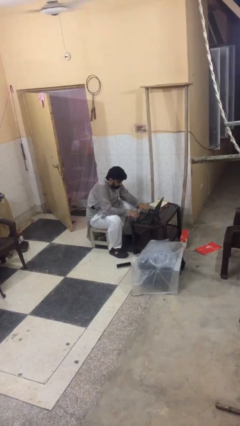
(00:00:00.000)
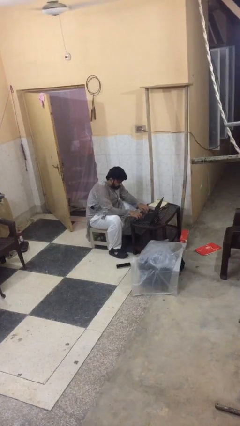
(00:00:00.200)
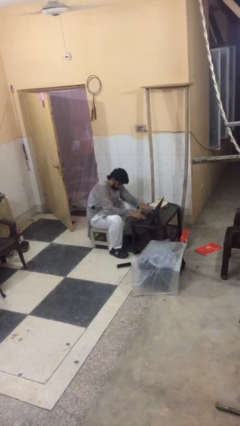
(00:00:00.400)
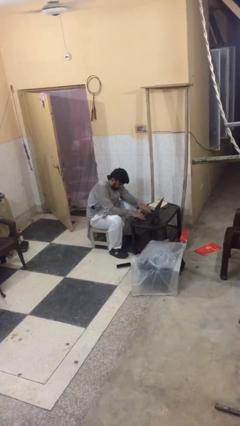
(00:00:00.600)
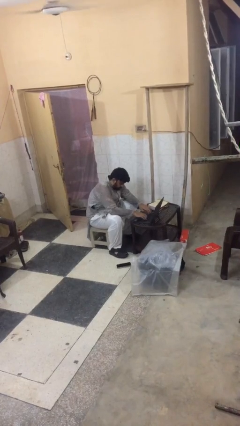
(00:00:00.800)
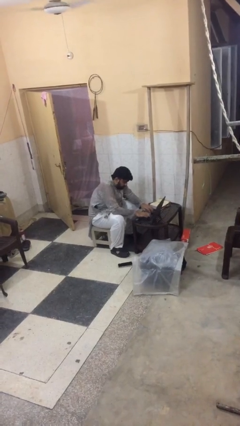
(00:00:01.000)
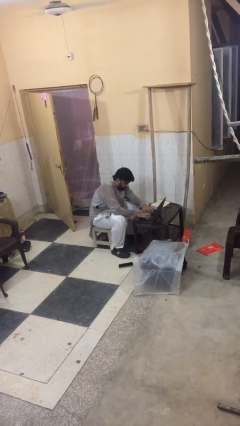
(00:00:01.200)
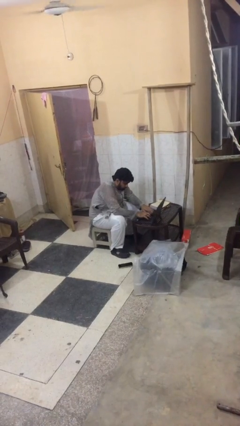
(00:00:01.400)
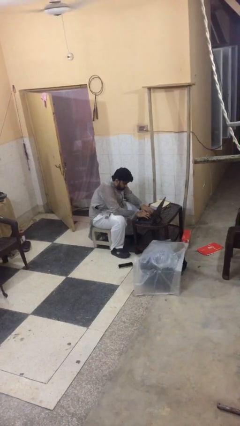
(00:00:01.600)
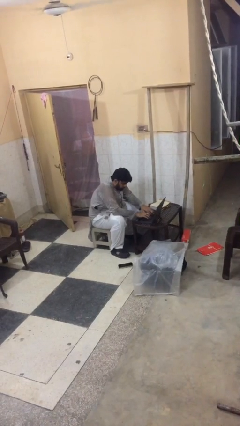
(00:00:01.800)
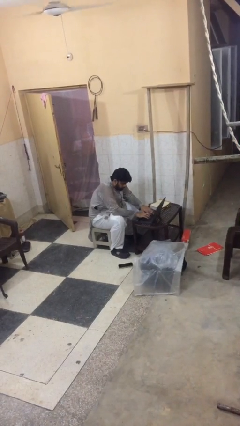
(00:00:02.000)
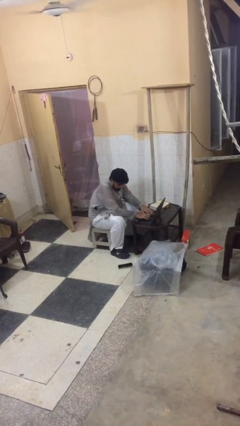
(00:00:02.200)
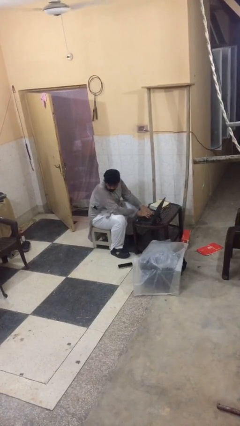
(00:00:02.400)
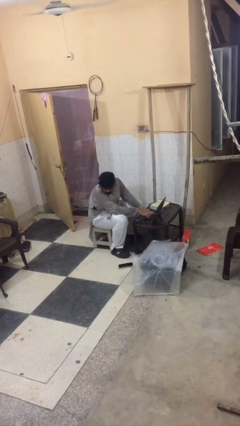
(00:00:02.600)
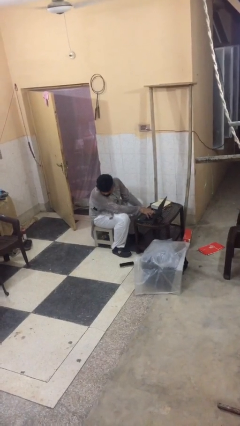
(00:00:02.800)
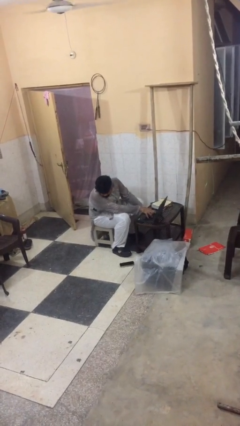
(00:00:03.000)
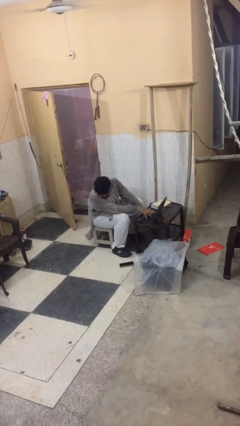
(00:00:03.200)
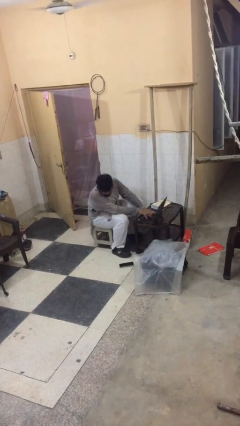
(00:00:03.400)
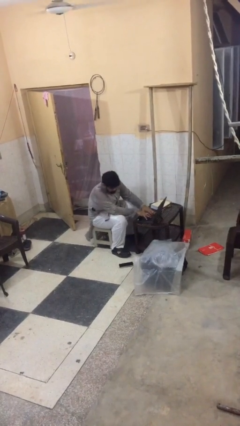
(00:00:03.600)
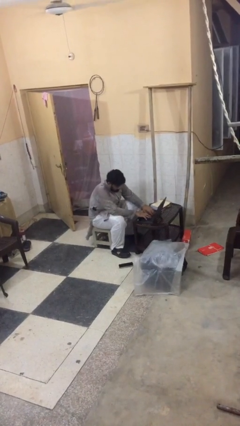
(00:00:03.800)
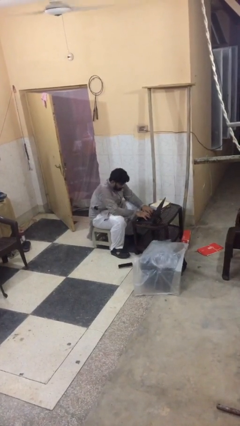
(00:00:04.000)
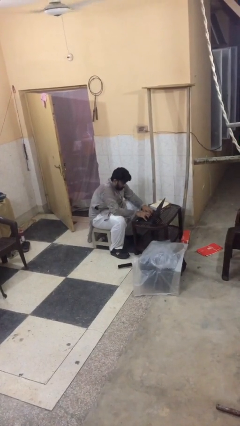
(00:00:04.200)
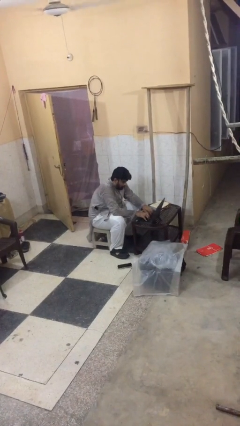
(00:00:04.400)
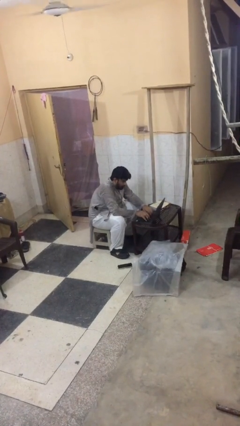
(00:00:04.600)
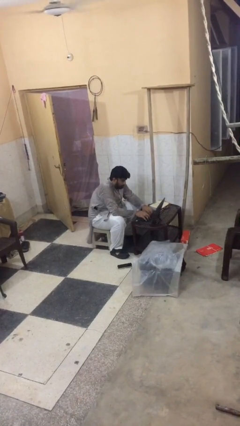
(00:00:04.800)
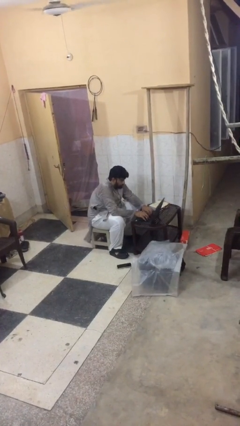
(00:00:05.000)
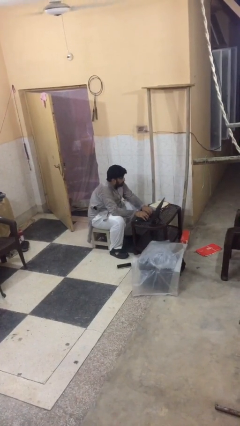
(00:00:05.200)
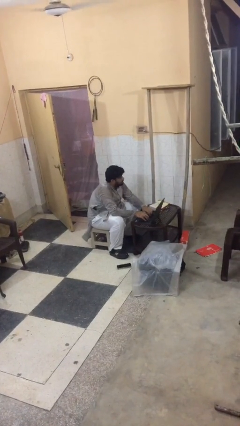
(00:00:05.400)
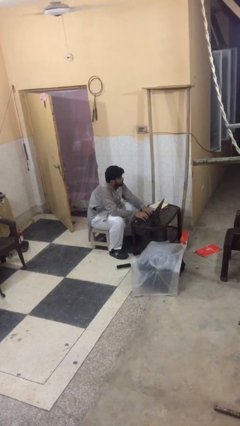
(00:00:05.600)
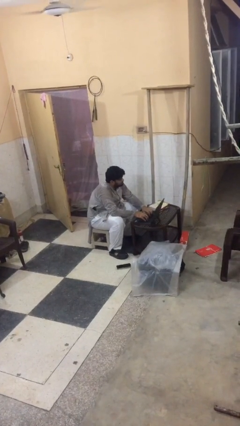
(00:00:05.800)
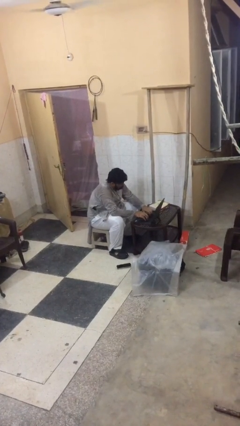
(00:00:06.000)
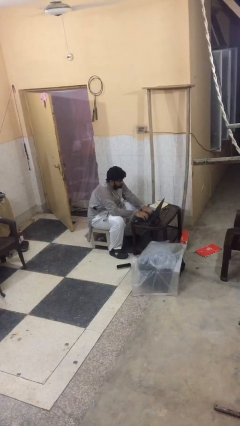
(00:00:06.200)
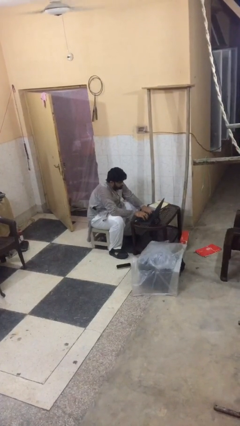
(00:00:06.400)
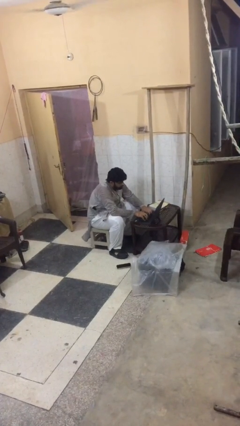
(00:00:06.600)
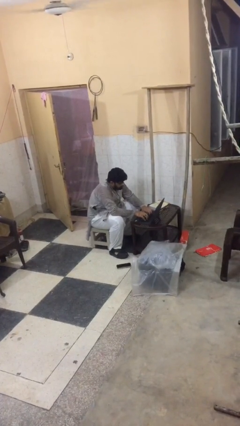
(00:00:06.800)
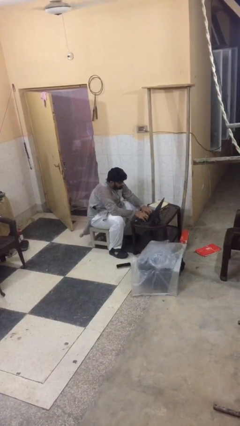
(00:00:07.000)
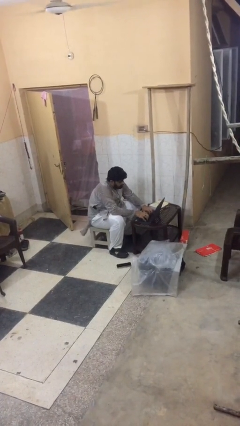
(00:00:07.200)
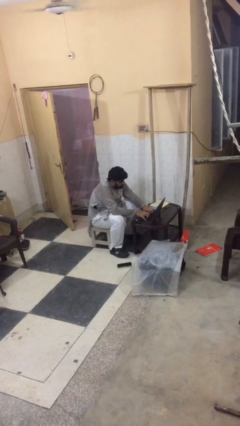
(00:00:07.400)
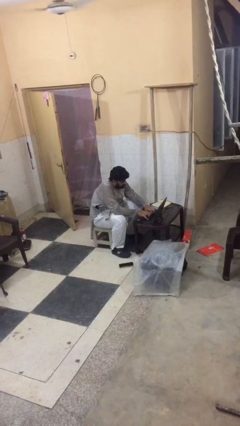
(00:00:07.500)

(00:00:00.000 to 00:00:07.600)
person interacts with laptop

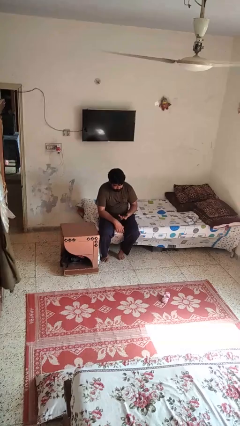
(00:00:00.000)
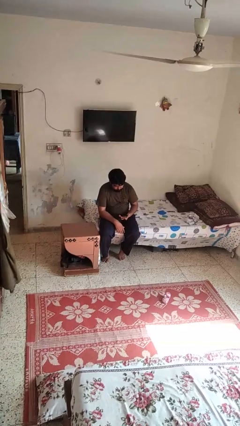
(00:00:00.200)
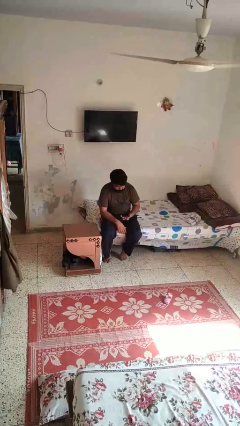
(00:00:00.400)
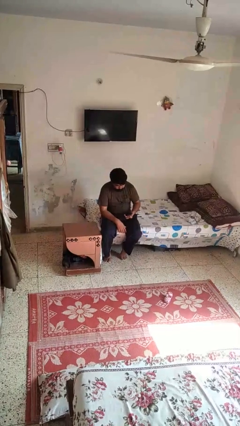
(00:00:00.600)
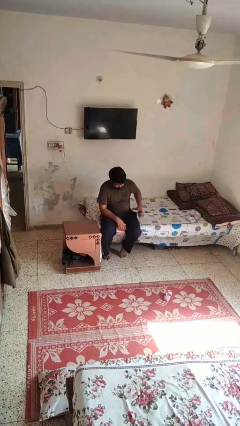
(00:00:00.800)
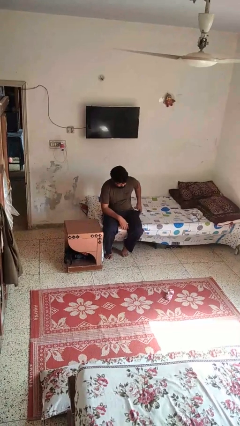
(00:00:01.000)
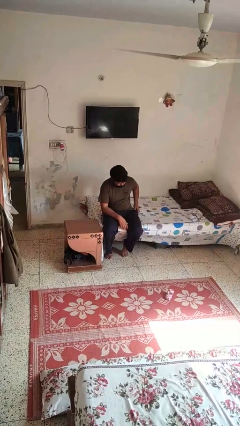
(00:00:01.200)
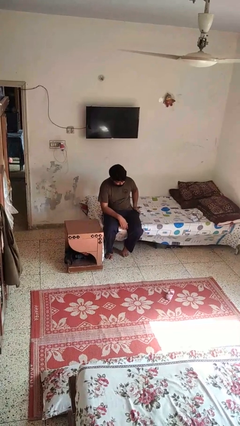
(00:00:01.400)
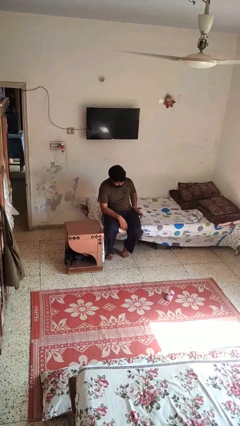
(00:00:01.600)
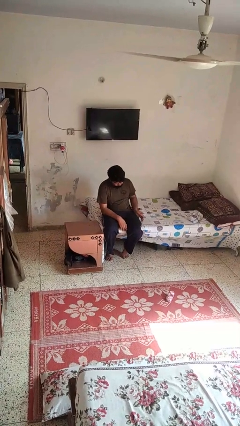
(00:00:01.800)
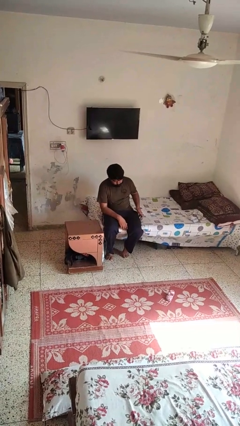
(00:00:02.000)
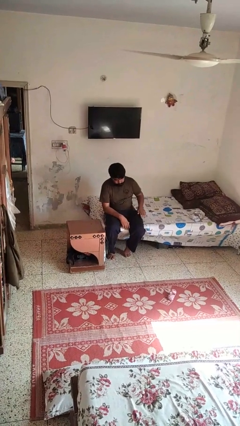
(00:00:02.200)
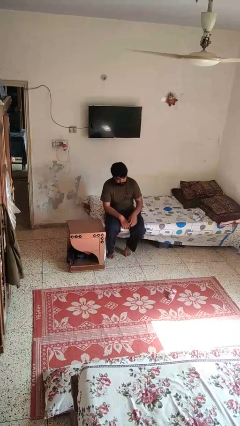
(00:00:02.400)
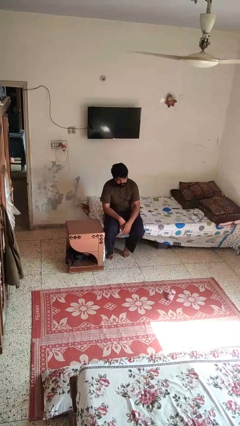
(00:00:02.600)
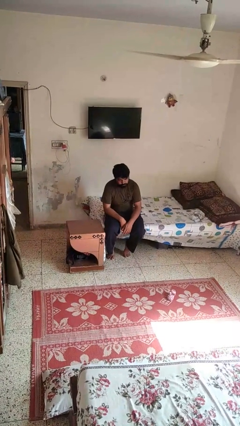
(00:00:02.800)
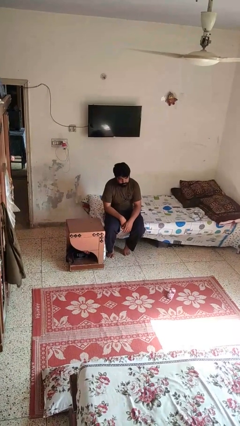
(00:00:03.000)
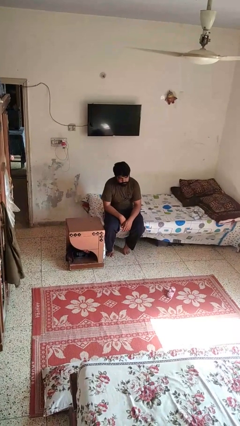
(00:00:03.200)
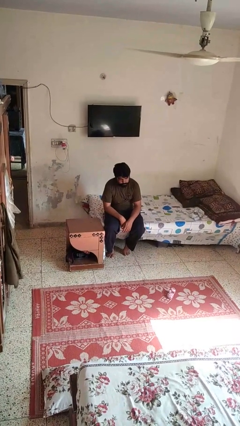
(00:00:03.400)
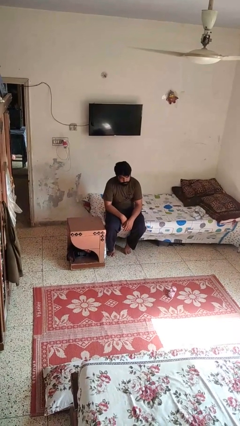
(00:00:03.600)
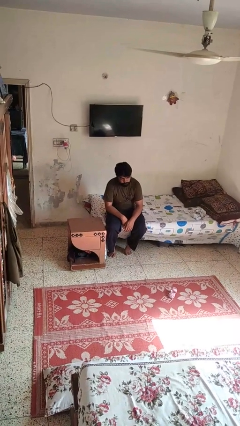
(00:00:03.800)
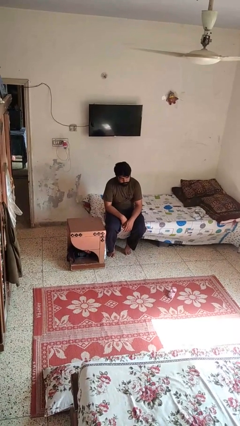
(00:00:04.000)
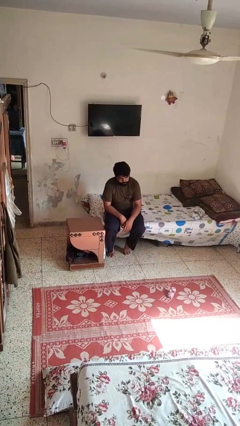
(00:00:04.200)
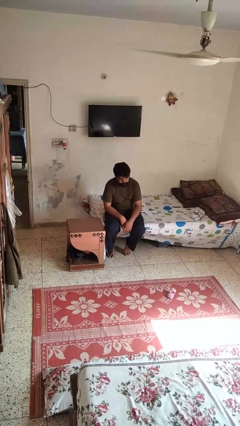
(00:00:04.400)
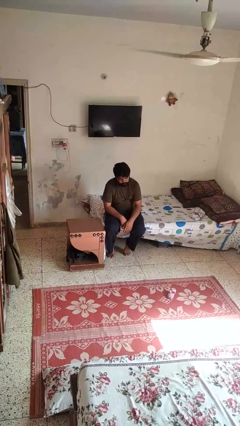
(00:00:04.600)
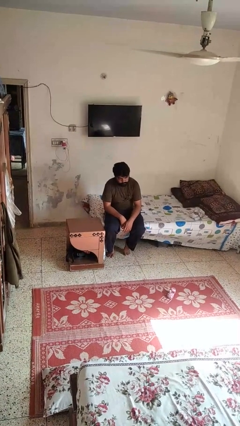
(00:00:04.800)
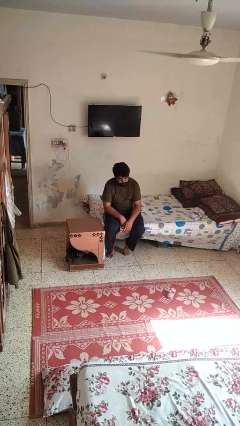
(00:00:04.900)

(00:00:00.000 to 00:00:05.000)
person puts phone into pocket

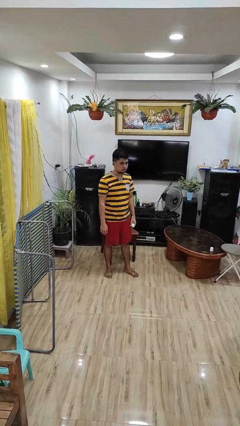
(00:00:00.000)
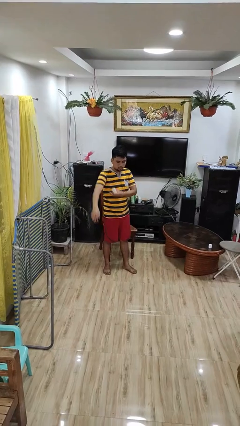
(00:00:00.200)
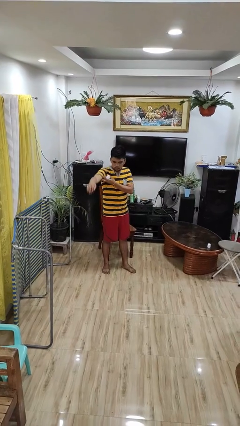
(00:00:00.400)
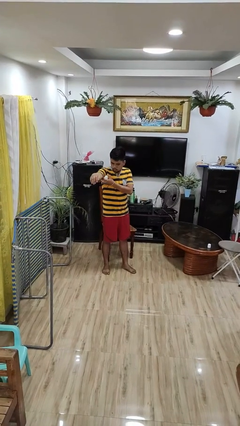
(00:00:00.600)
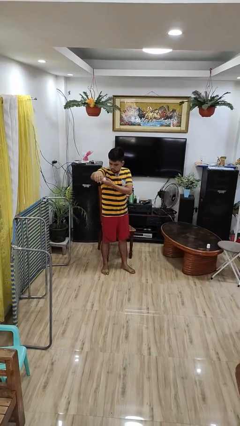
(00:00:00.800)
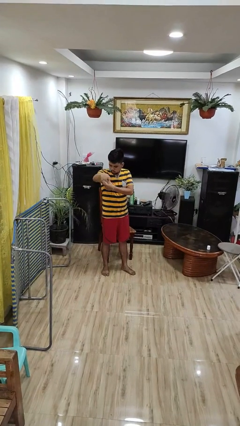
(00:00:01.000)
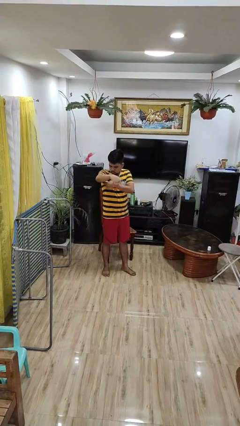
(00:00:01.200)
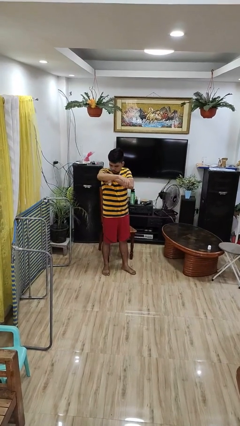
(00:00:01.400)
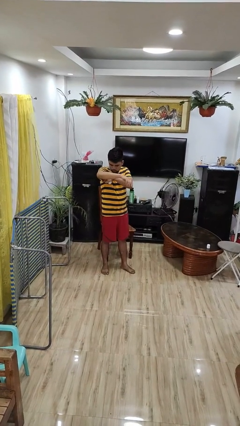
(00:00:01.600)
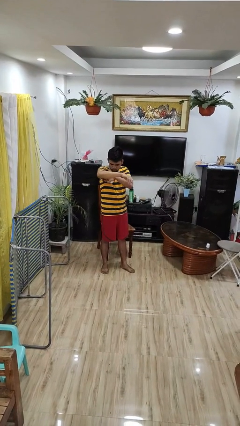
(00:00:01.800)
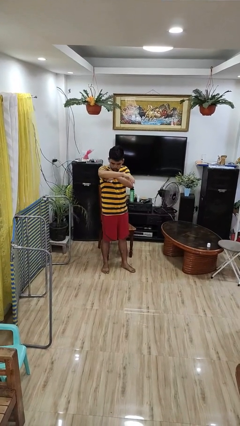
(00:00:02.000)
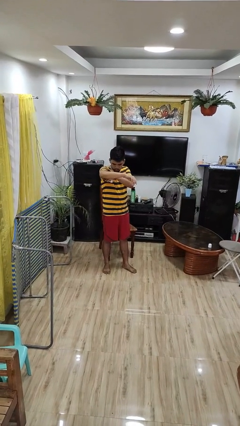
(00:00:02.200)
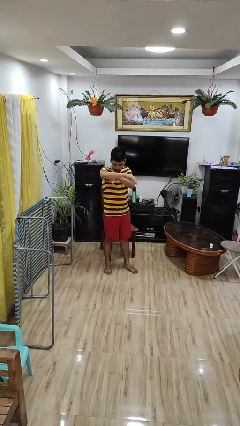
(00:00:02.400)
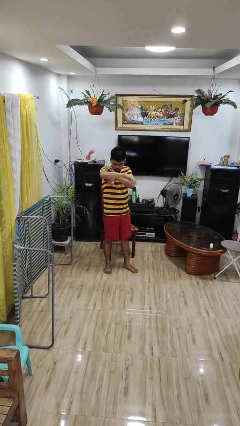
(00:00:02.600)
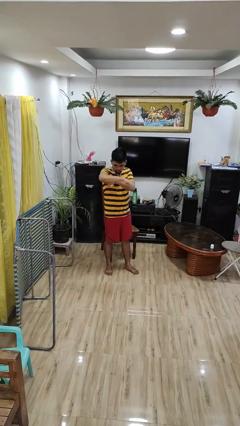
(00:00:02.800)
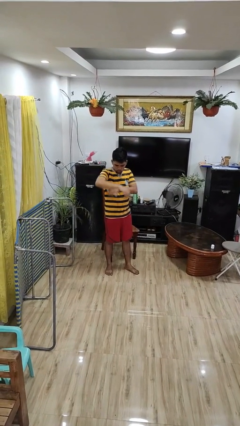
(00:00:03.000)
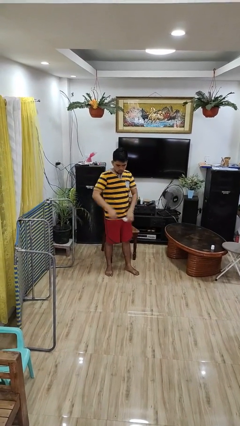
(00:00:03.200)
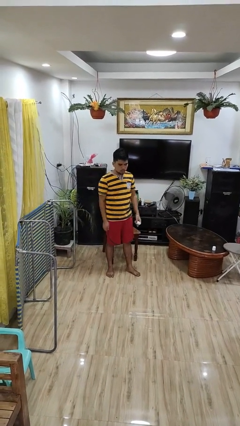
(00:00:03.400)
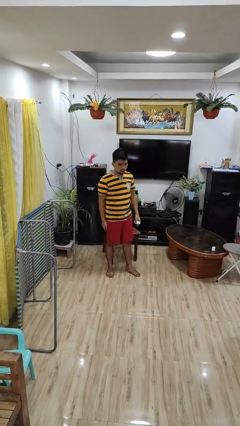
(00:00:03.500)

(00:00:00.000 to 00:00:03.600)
person applies deodorant

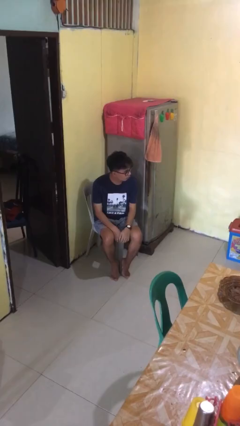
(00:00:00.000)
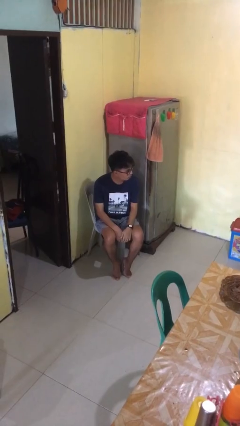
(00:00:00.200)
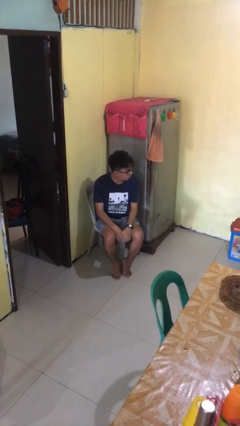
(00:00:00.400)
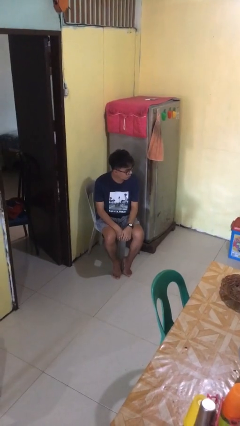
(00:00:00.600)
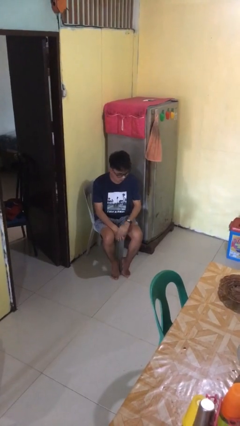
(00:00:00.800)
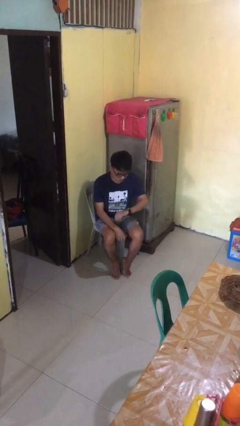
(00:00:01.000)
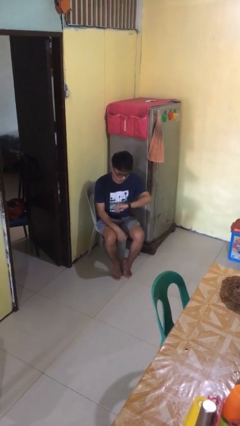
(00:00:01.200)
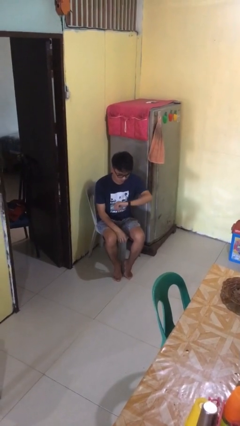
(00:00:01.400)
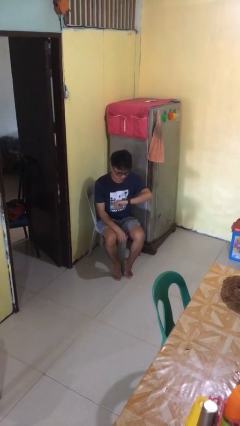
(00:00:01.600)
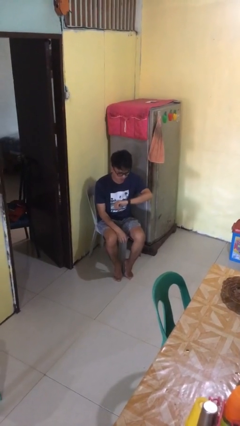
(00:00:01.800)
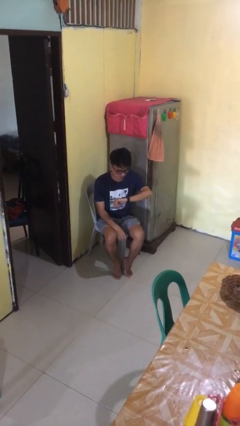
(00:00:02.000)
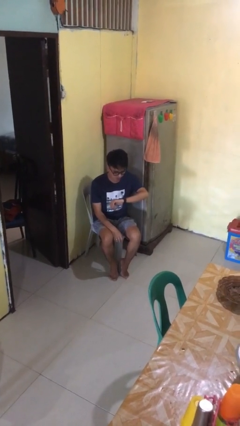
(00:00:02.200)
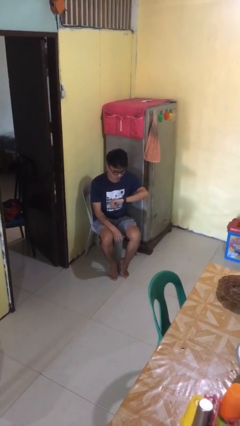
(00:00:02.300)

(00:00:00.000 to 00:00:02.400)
person looks at wristwatch
